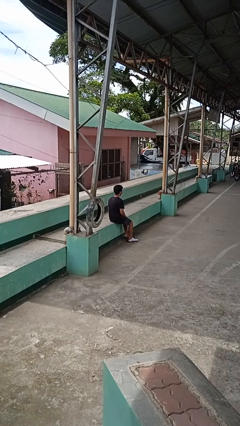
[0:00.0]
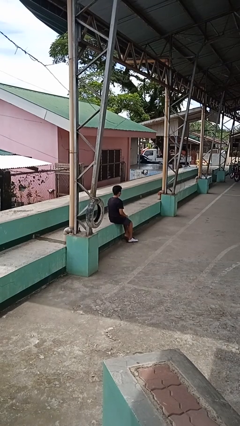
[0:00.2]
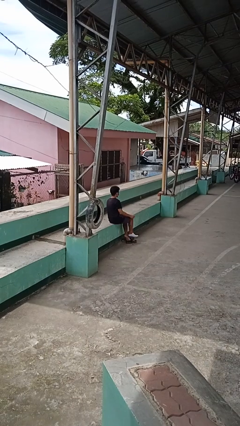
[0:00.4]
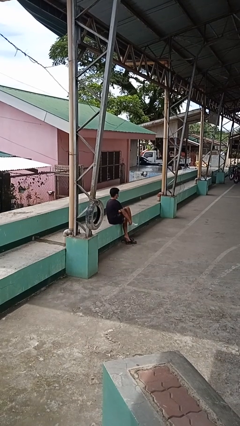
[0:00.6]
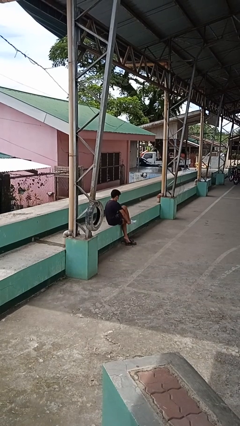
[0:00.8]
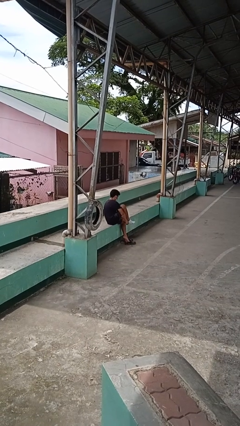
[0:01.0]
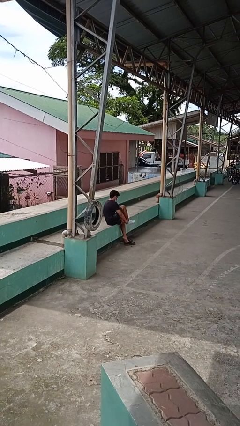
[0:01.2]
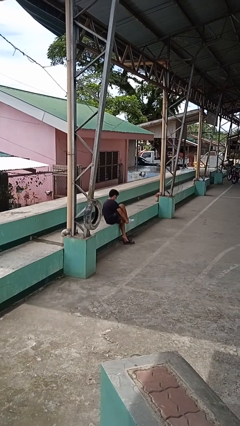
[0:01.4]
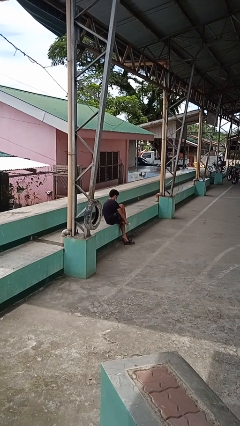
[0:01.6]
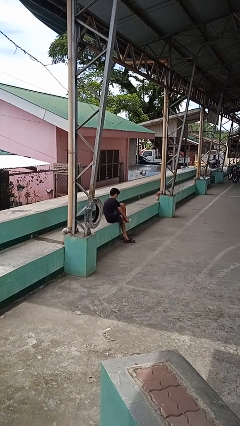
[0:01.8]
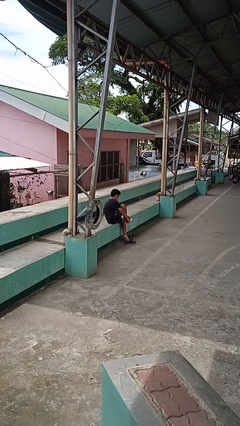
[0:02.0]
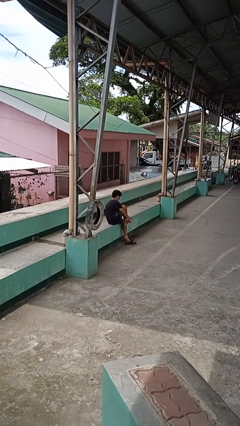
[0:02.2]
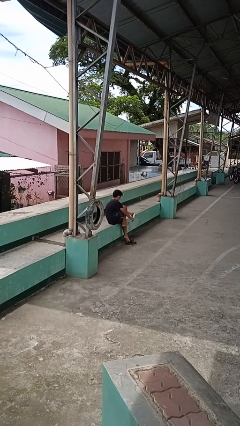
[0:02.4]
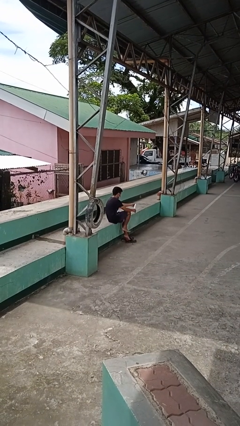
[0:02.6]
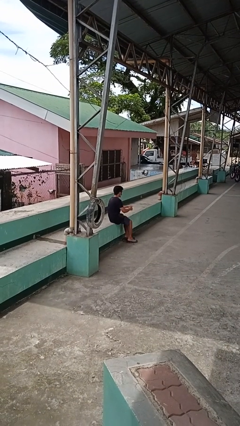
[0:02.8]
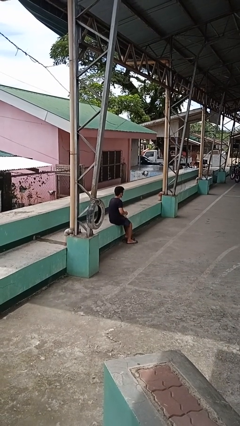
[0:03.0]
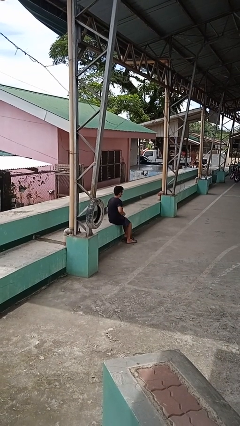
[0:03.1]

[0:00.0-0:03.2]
person takes off socks

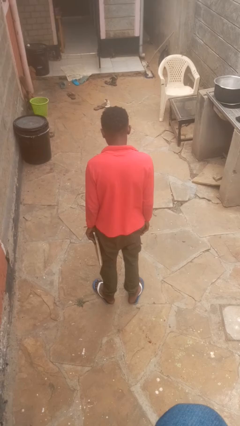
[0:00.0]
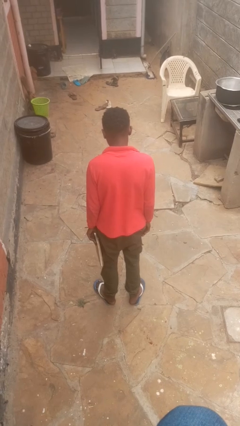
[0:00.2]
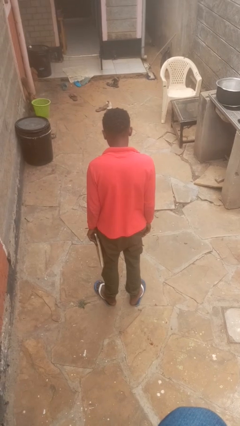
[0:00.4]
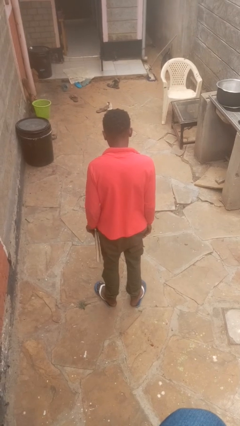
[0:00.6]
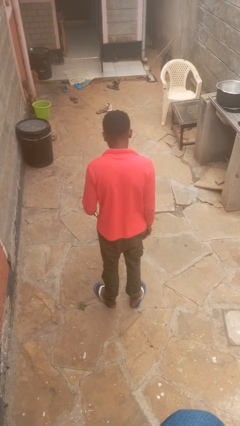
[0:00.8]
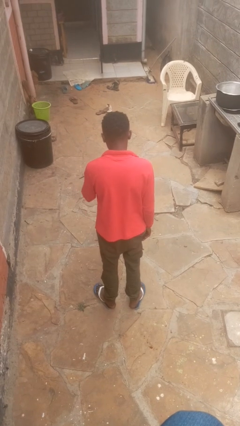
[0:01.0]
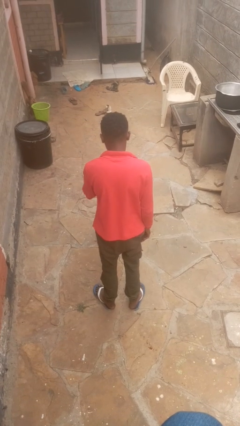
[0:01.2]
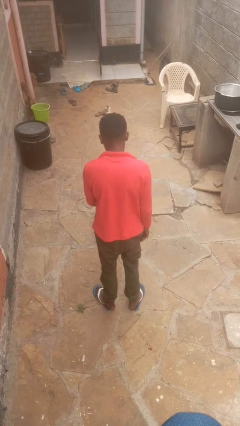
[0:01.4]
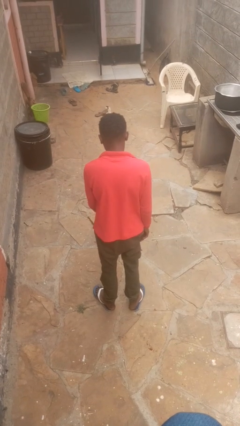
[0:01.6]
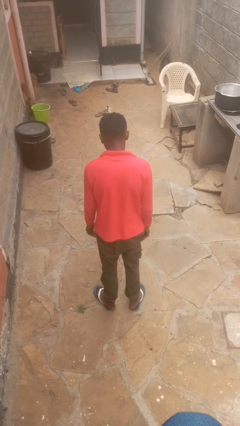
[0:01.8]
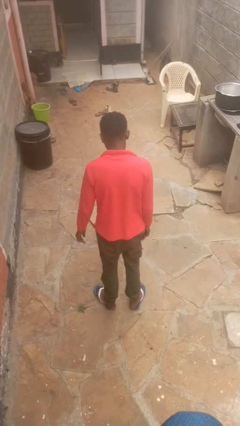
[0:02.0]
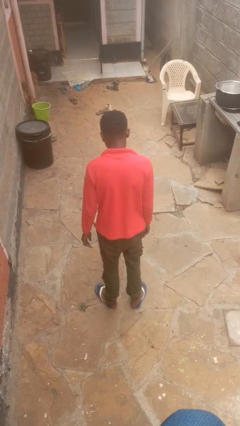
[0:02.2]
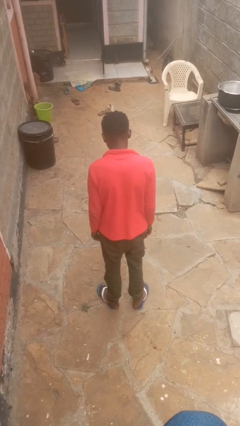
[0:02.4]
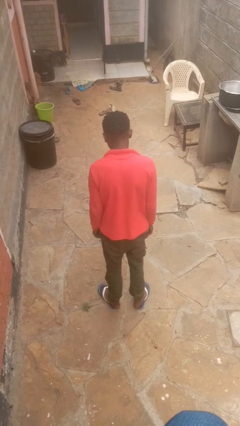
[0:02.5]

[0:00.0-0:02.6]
person throws object to ground

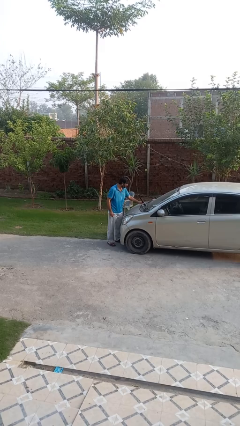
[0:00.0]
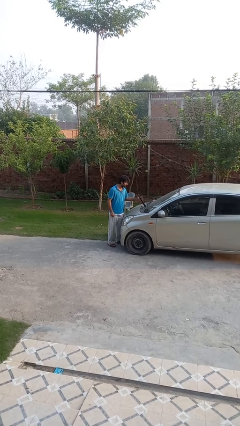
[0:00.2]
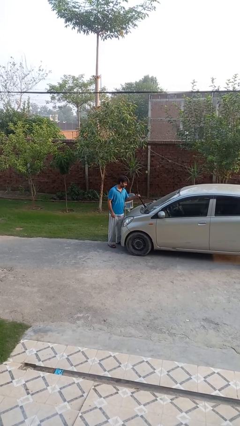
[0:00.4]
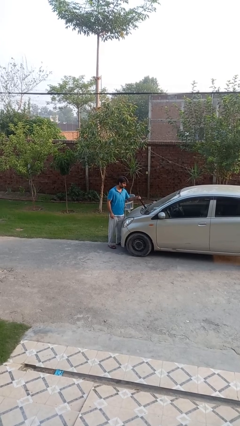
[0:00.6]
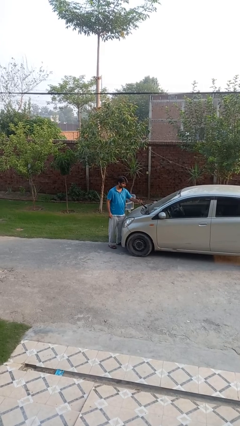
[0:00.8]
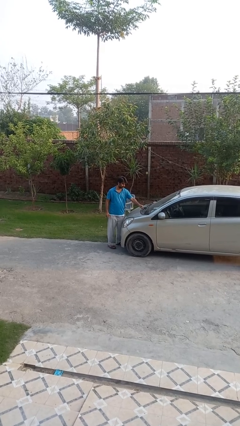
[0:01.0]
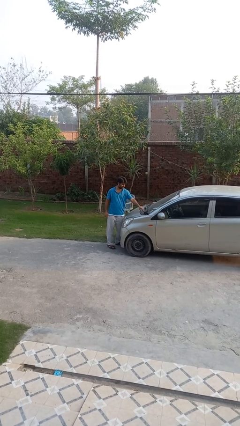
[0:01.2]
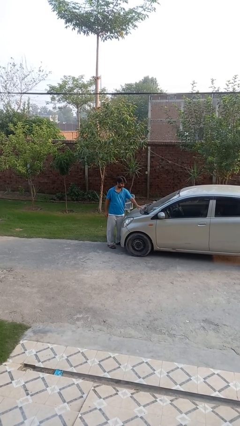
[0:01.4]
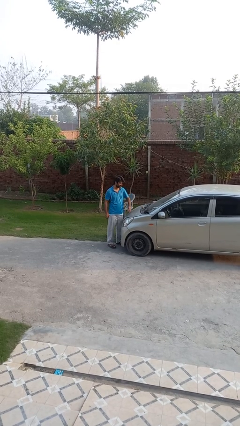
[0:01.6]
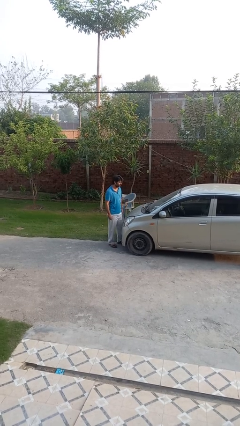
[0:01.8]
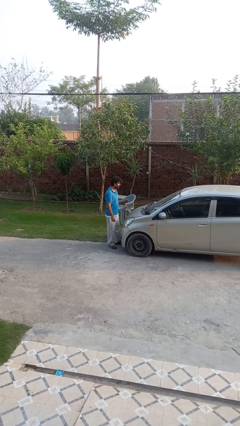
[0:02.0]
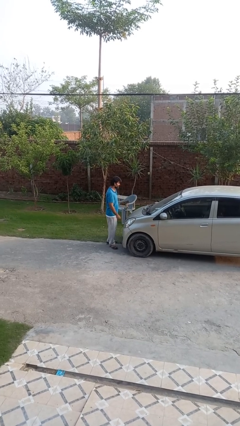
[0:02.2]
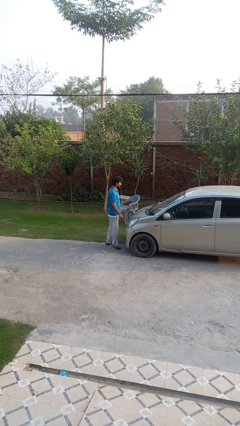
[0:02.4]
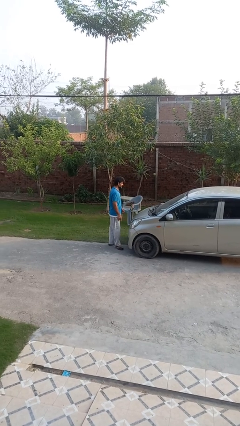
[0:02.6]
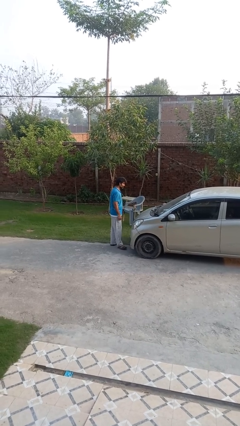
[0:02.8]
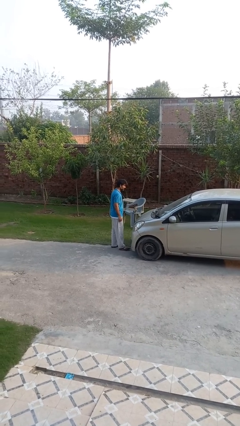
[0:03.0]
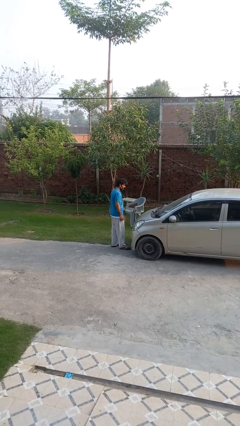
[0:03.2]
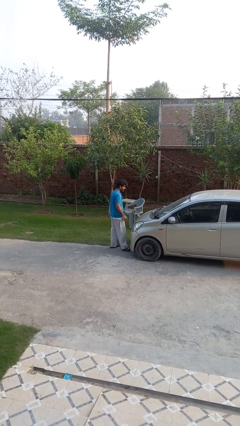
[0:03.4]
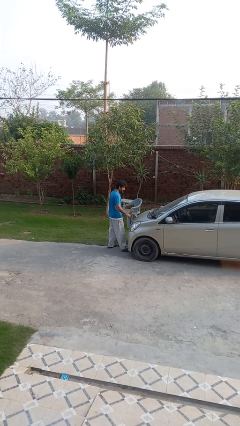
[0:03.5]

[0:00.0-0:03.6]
person flips down car wipers

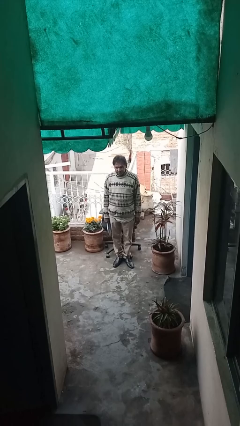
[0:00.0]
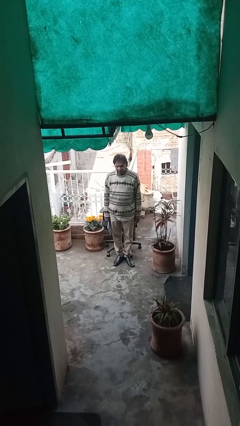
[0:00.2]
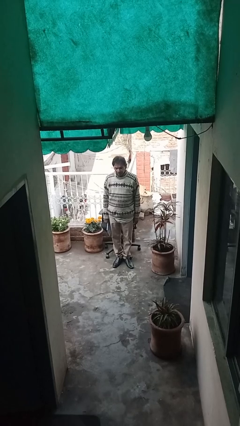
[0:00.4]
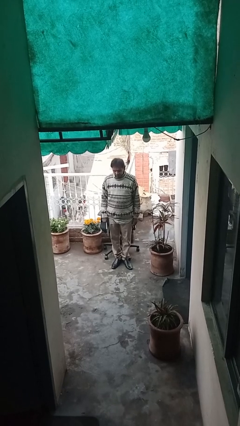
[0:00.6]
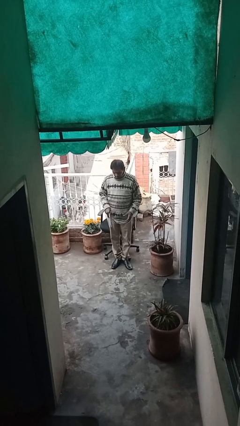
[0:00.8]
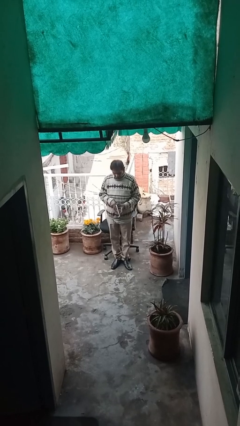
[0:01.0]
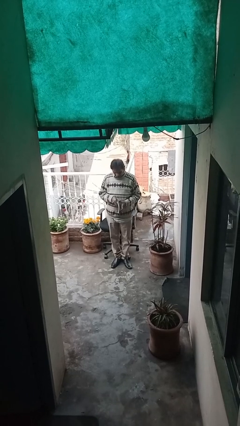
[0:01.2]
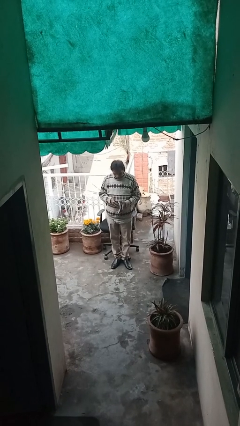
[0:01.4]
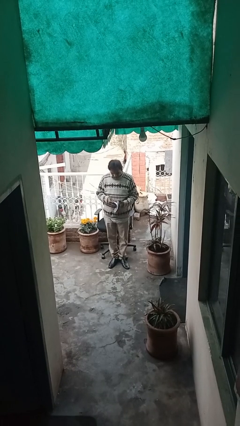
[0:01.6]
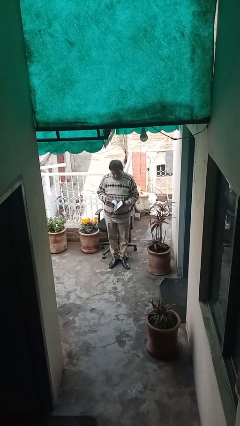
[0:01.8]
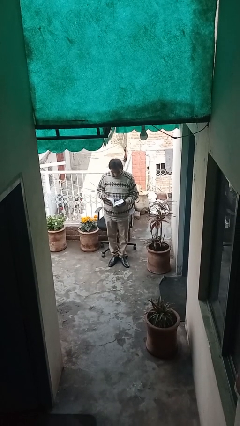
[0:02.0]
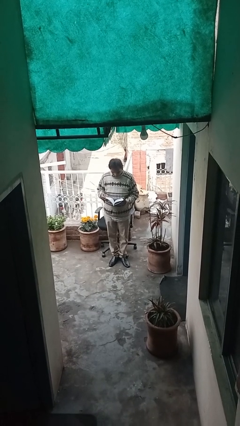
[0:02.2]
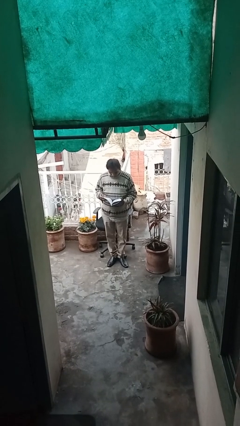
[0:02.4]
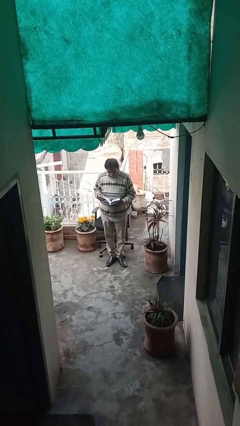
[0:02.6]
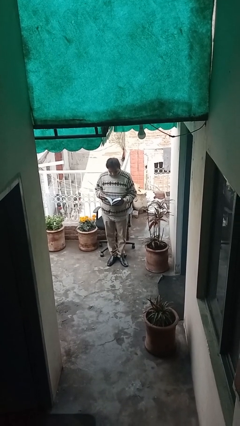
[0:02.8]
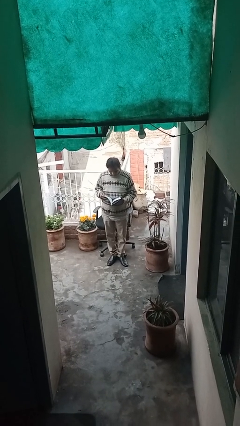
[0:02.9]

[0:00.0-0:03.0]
person reads document

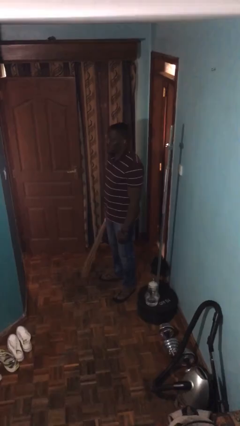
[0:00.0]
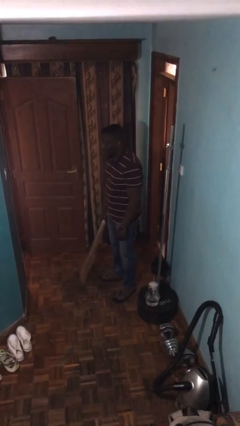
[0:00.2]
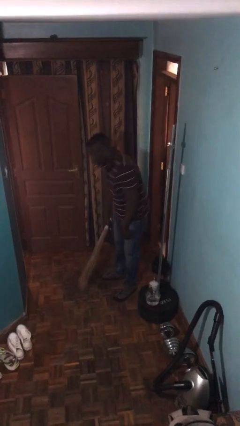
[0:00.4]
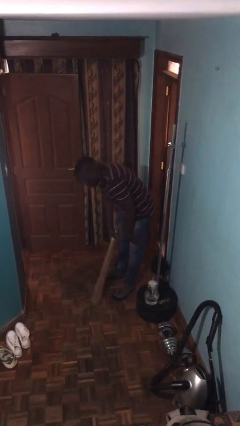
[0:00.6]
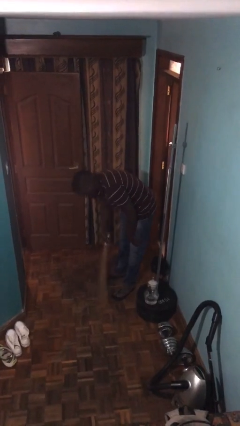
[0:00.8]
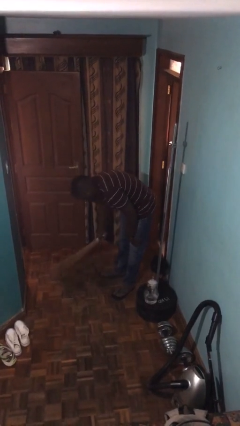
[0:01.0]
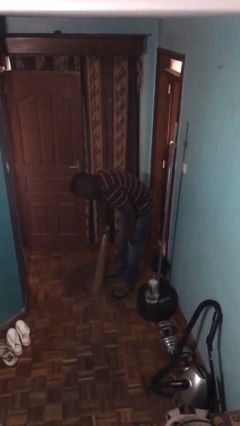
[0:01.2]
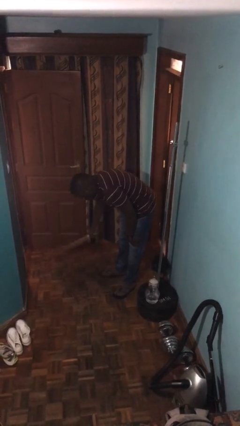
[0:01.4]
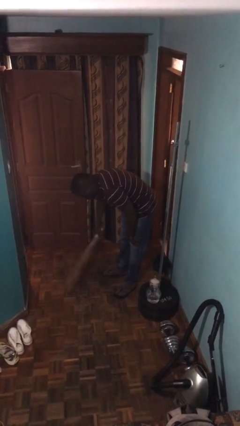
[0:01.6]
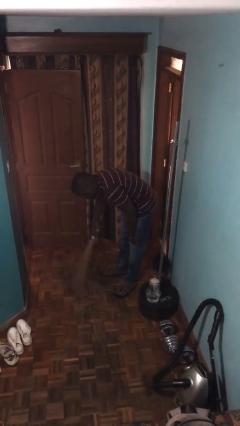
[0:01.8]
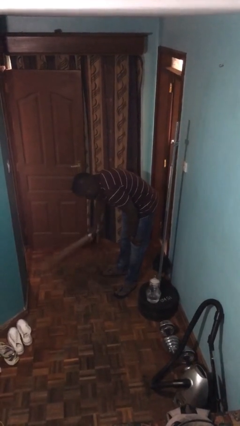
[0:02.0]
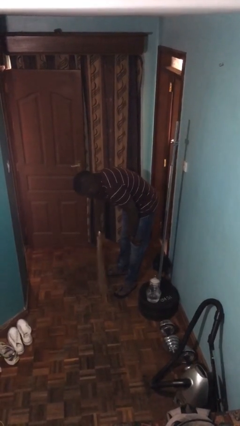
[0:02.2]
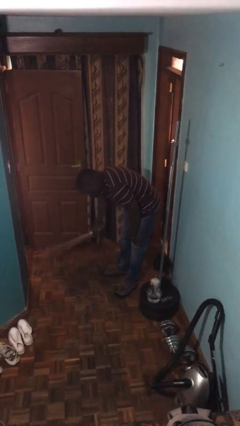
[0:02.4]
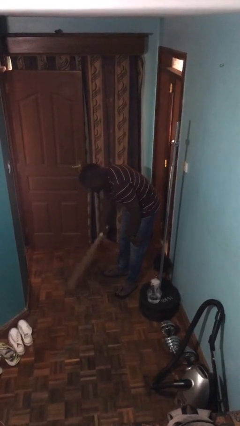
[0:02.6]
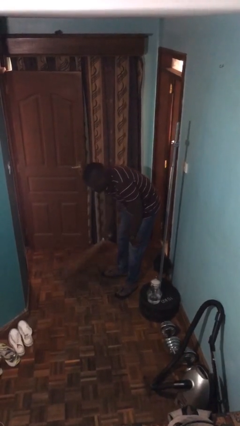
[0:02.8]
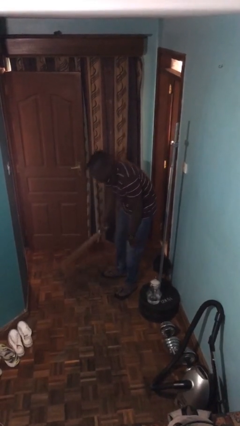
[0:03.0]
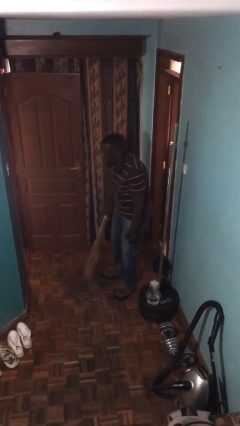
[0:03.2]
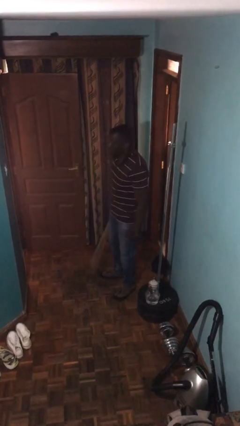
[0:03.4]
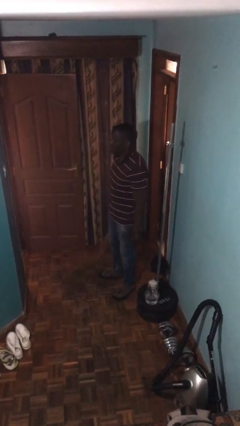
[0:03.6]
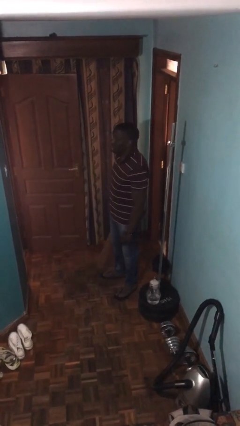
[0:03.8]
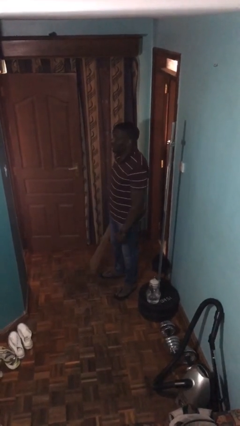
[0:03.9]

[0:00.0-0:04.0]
person sweeps floor

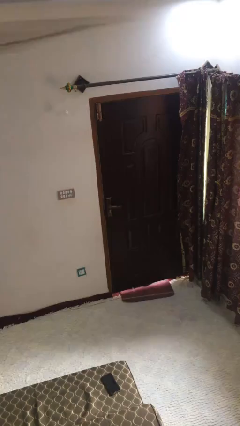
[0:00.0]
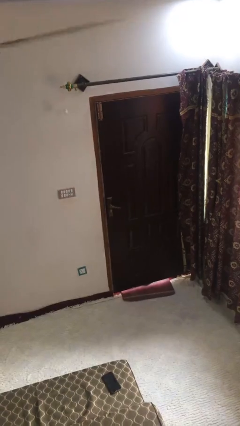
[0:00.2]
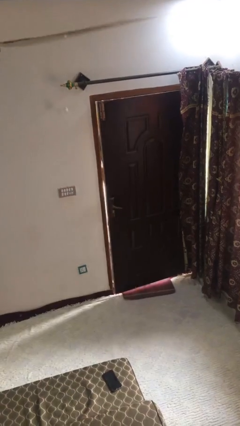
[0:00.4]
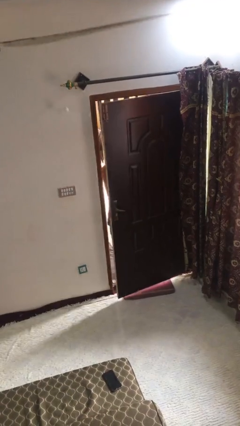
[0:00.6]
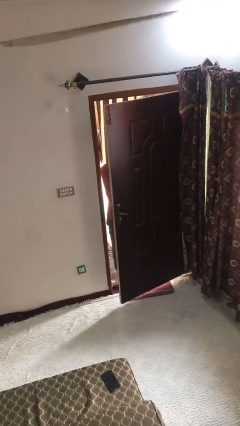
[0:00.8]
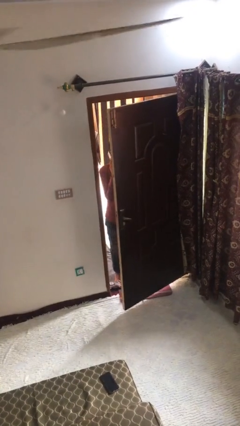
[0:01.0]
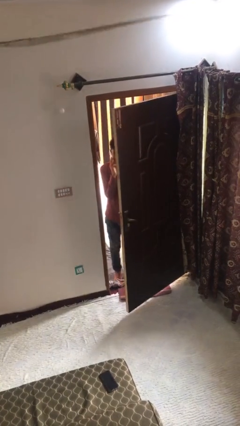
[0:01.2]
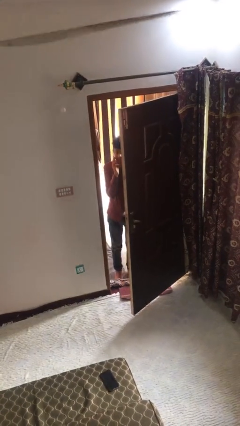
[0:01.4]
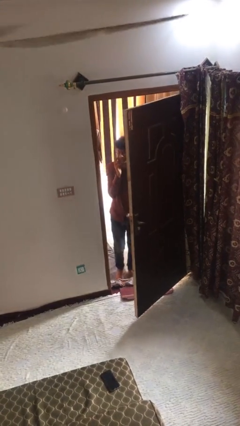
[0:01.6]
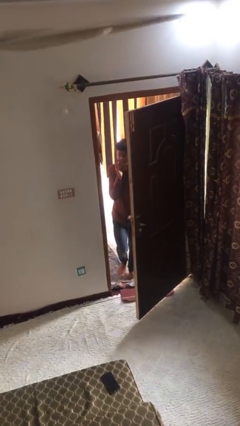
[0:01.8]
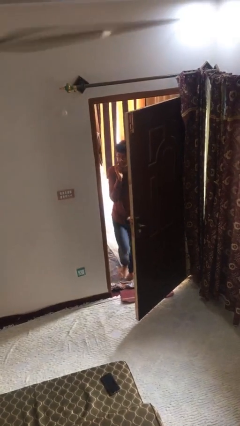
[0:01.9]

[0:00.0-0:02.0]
person opens facility door
